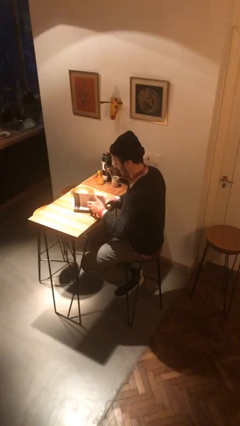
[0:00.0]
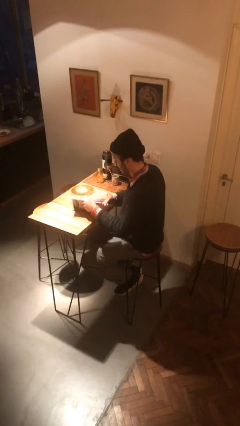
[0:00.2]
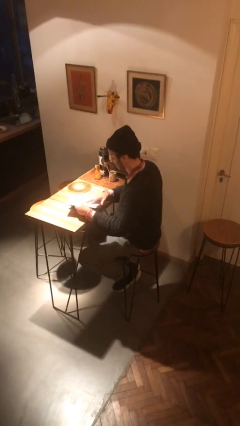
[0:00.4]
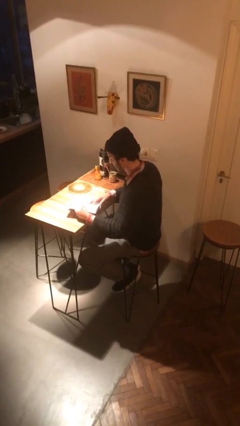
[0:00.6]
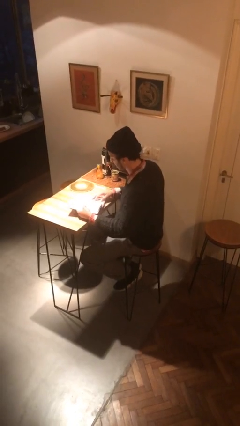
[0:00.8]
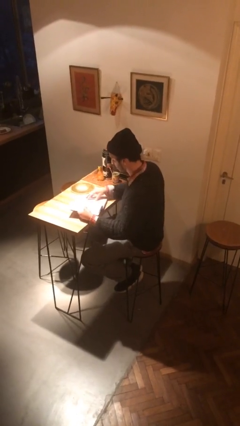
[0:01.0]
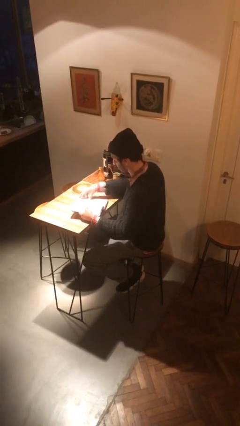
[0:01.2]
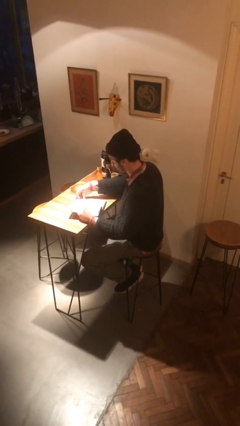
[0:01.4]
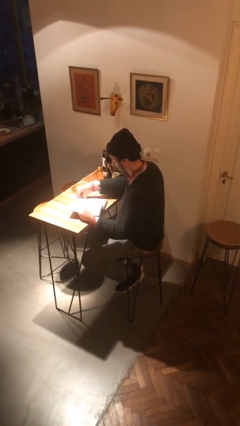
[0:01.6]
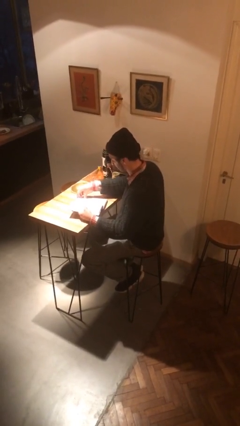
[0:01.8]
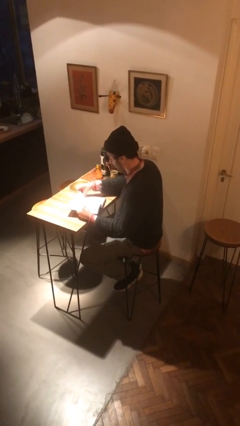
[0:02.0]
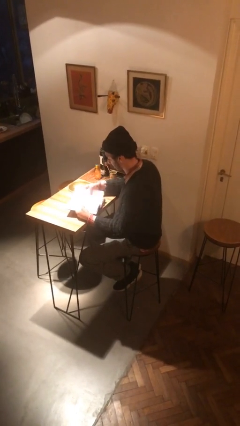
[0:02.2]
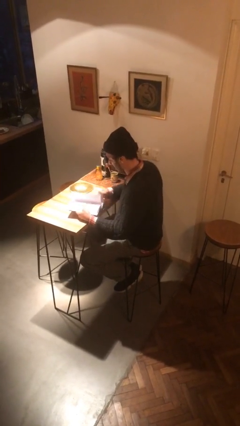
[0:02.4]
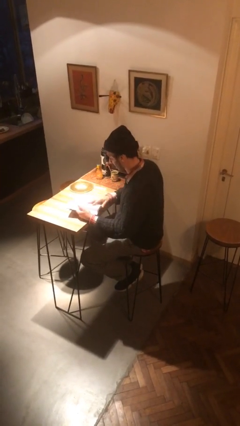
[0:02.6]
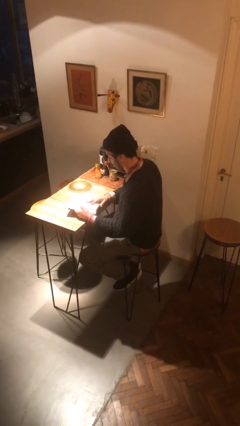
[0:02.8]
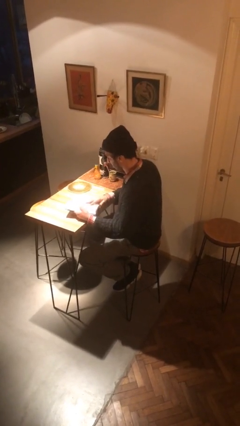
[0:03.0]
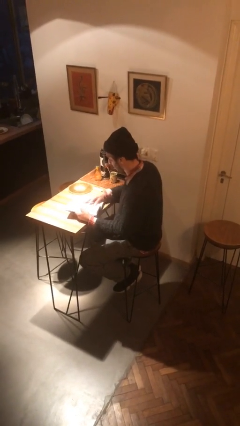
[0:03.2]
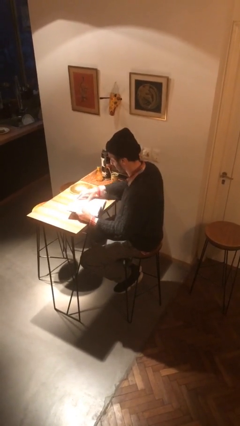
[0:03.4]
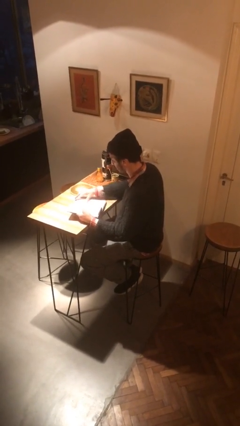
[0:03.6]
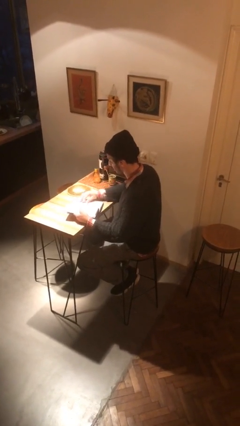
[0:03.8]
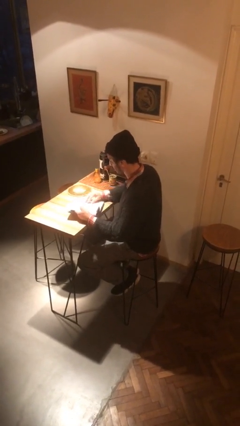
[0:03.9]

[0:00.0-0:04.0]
person reads book

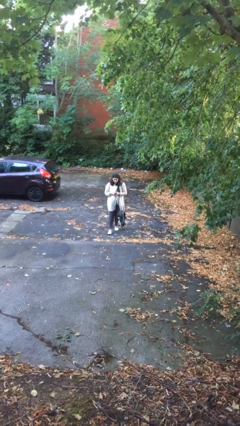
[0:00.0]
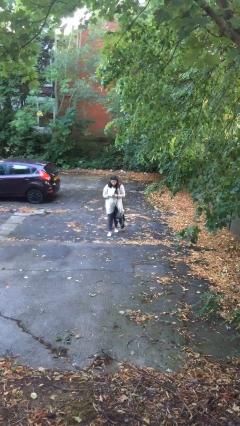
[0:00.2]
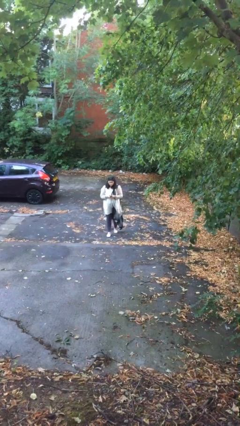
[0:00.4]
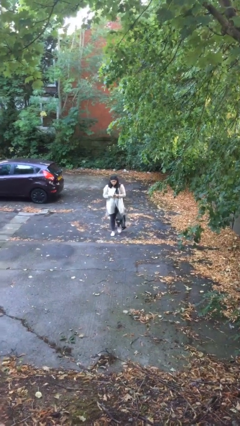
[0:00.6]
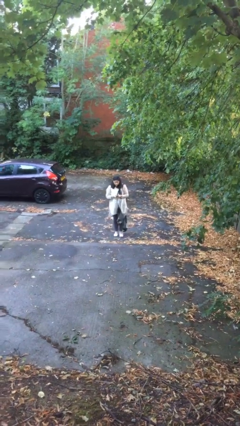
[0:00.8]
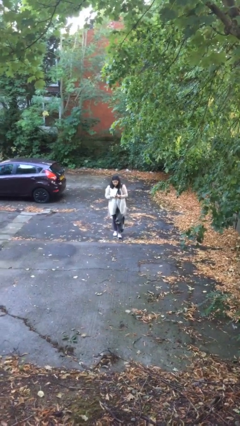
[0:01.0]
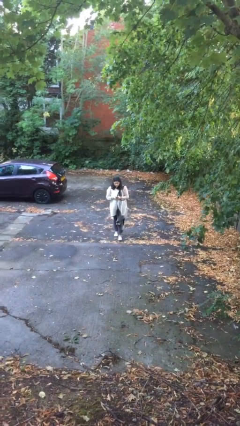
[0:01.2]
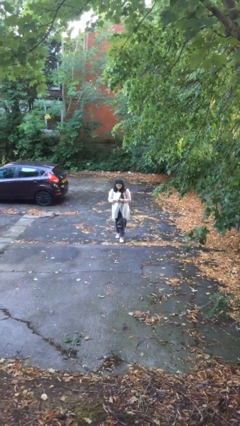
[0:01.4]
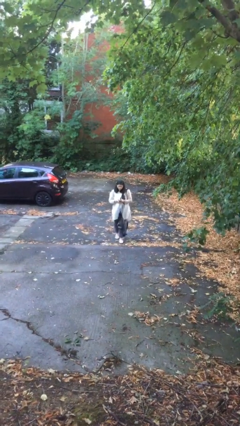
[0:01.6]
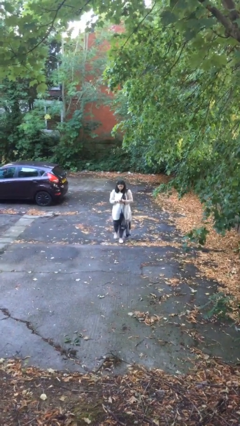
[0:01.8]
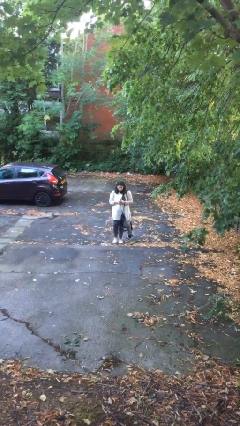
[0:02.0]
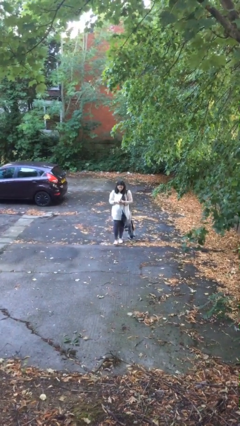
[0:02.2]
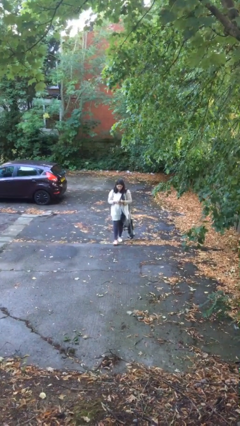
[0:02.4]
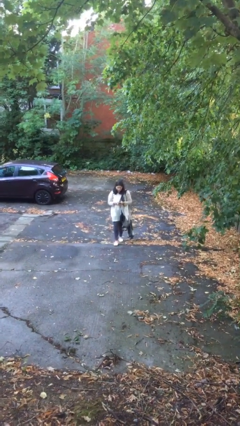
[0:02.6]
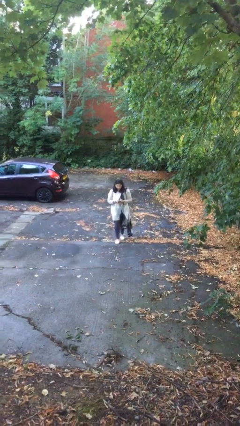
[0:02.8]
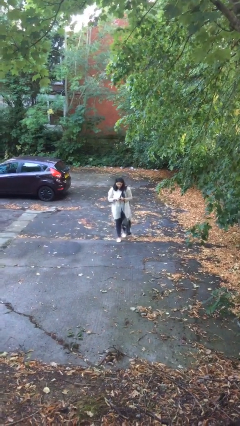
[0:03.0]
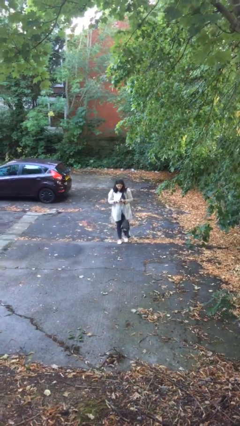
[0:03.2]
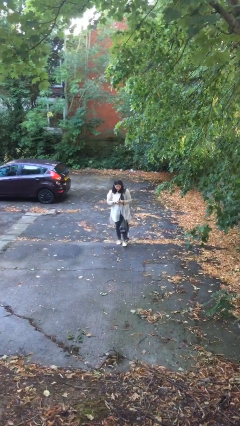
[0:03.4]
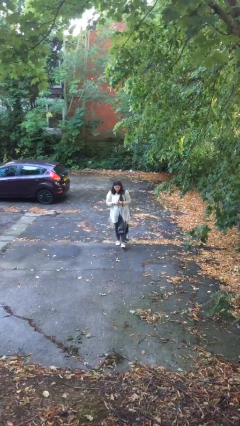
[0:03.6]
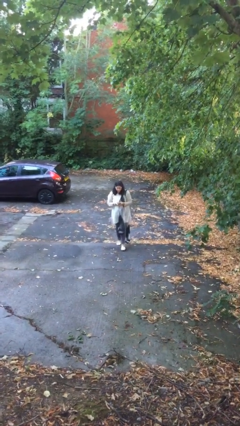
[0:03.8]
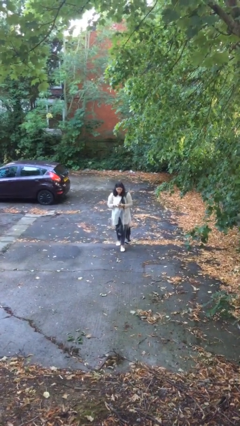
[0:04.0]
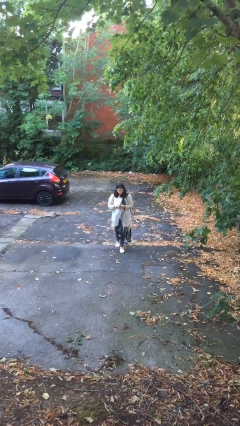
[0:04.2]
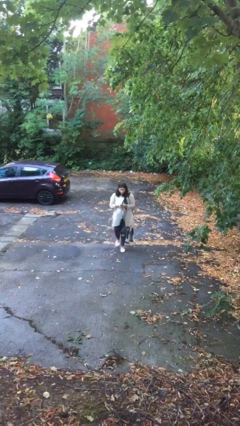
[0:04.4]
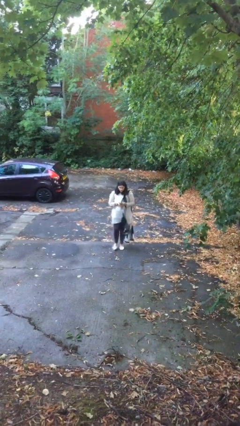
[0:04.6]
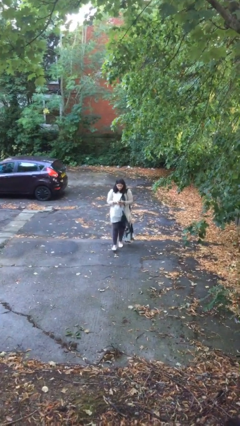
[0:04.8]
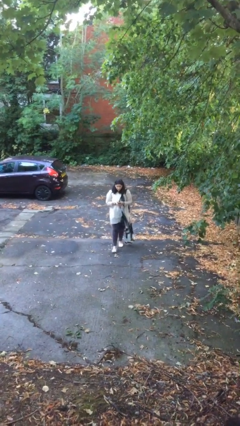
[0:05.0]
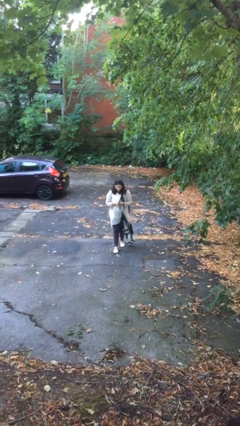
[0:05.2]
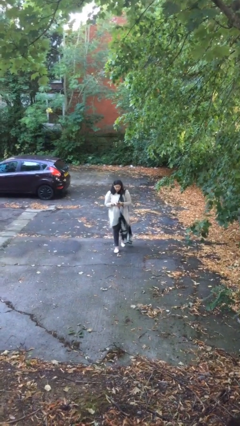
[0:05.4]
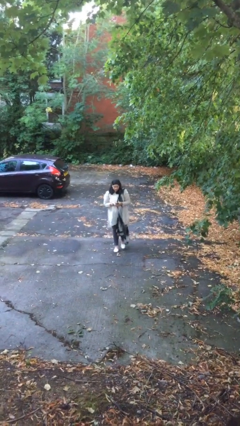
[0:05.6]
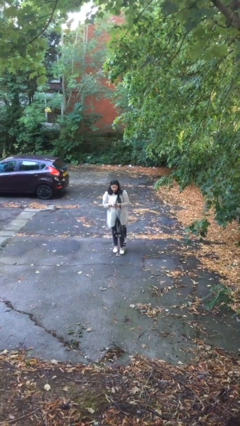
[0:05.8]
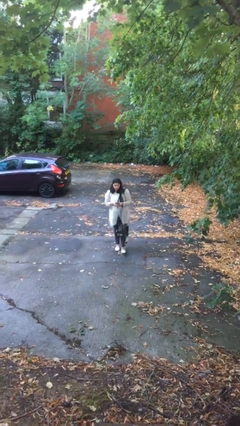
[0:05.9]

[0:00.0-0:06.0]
person texts on phone

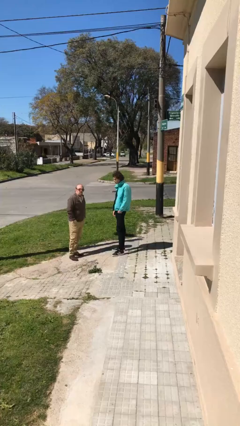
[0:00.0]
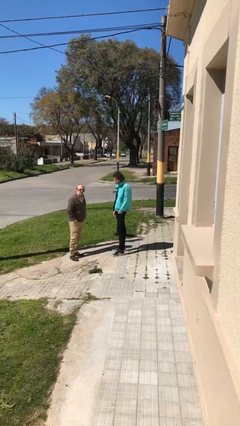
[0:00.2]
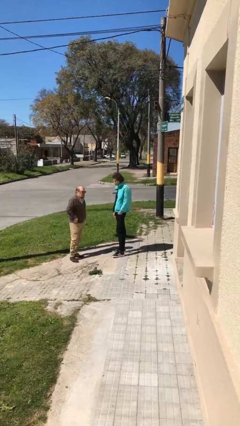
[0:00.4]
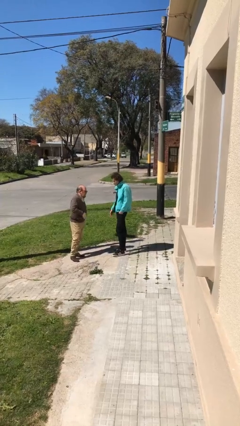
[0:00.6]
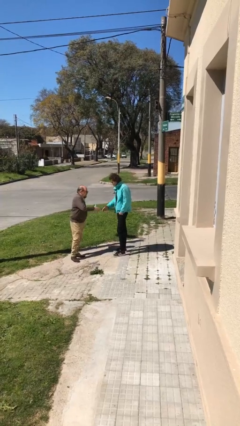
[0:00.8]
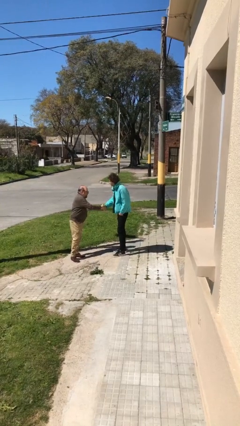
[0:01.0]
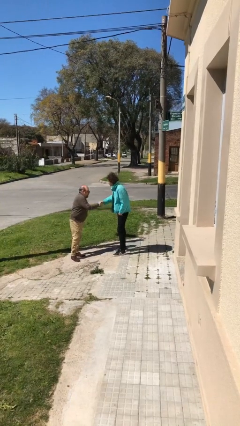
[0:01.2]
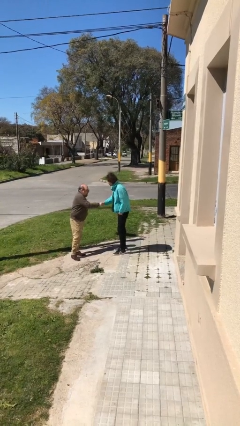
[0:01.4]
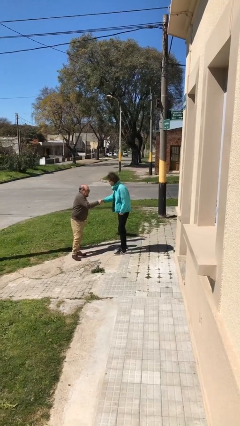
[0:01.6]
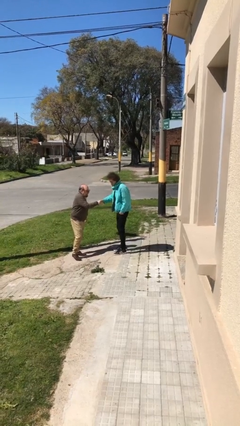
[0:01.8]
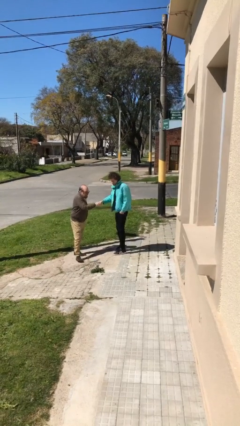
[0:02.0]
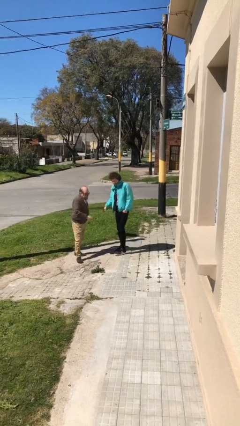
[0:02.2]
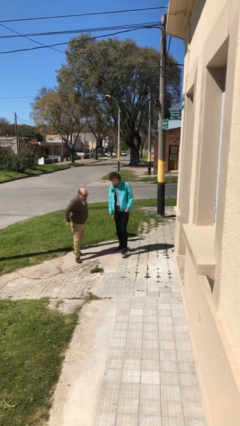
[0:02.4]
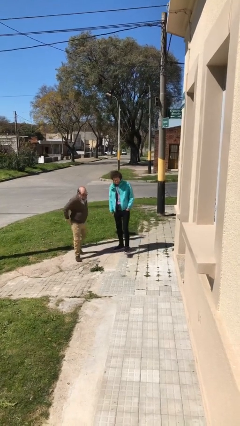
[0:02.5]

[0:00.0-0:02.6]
person shakes hand

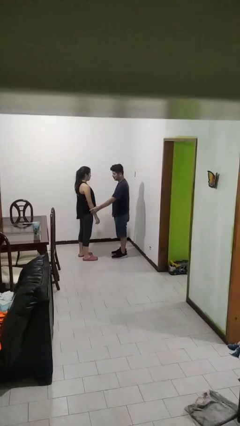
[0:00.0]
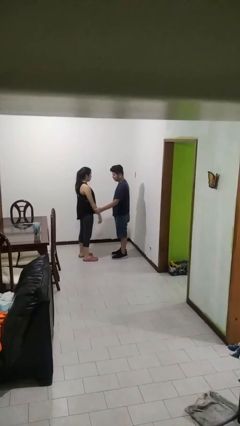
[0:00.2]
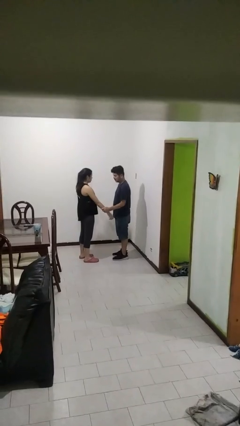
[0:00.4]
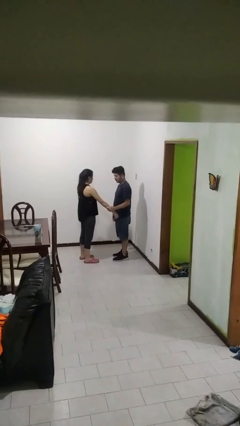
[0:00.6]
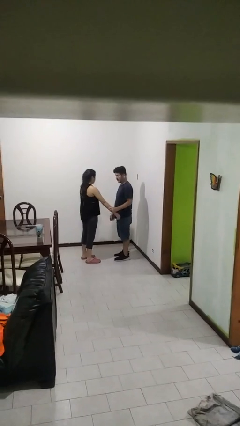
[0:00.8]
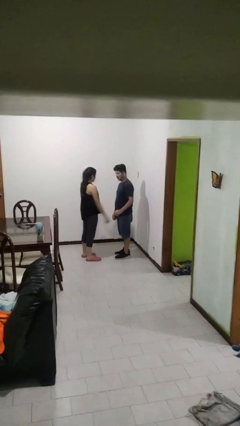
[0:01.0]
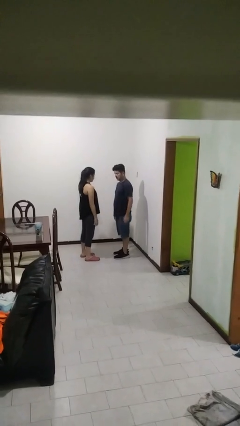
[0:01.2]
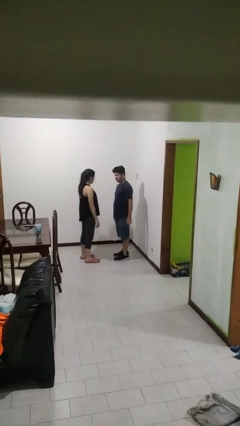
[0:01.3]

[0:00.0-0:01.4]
person grabs person by forearm

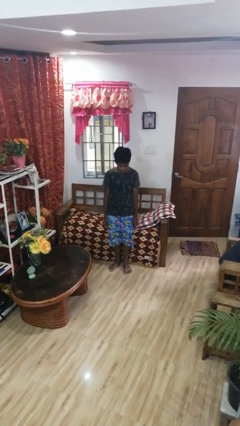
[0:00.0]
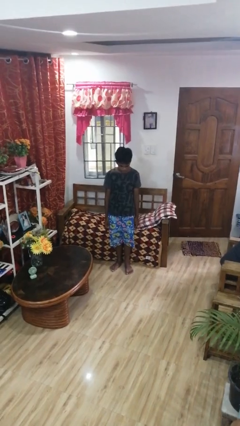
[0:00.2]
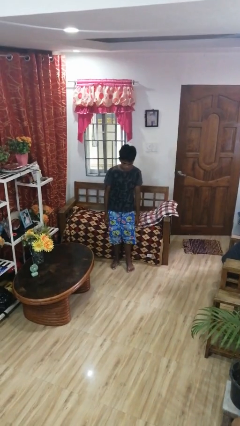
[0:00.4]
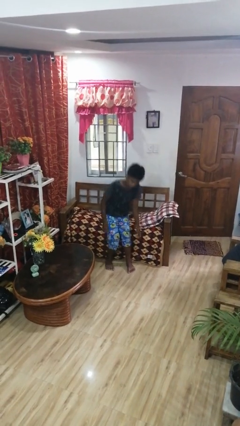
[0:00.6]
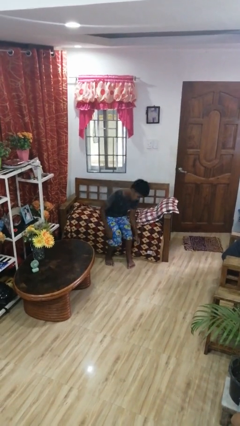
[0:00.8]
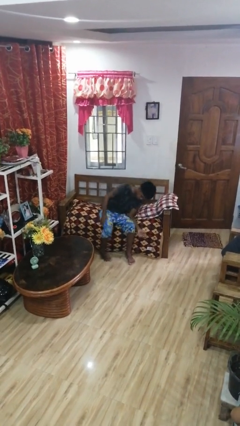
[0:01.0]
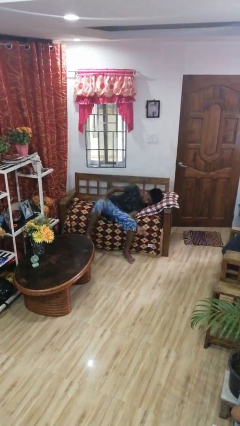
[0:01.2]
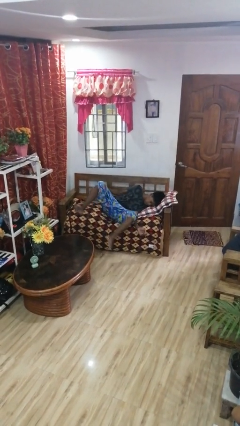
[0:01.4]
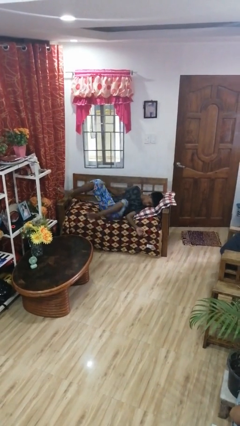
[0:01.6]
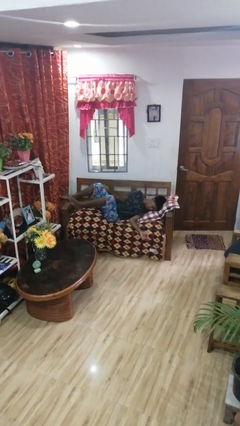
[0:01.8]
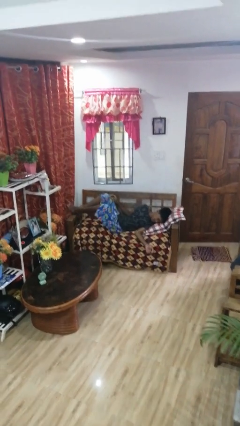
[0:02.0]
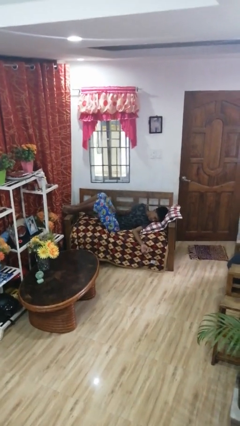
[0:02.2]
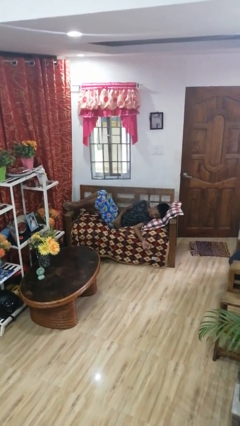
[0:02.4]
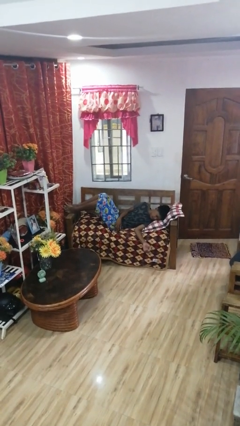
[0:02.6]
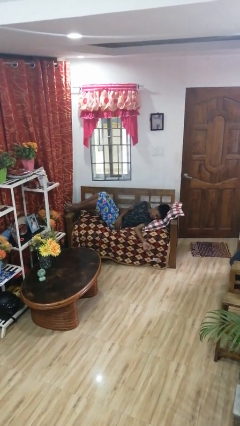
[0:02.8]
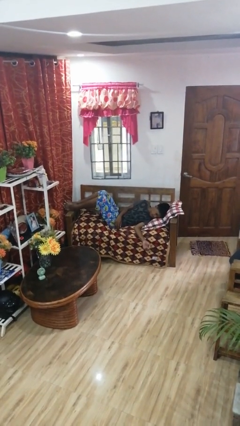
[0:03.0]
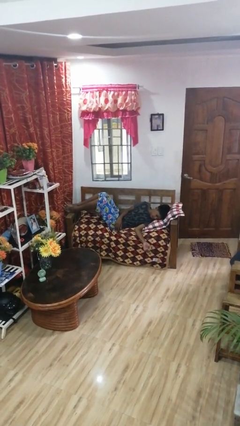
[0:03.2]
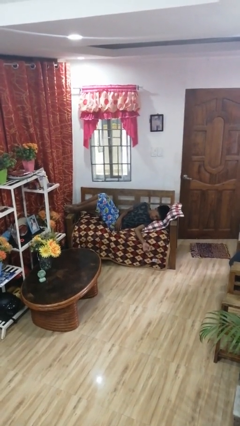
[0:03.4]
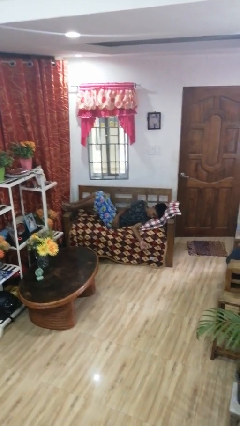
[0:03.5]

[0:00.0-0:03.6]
person lies down on couch
